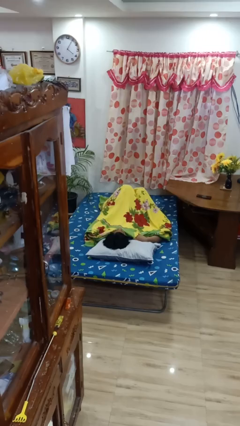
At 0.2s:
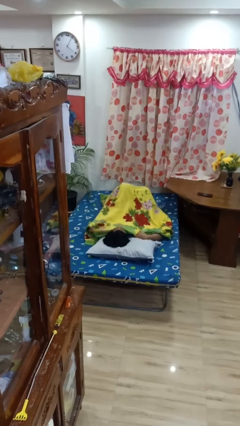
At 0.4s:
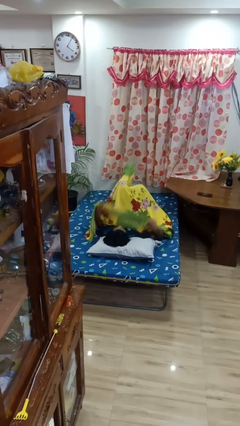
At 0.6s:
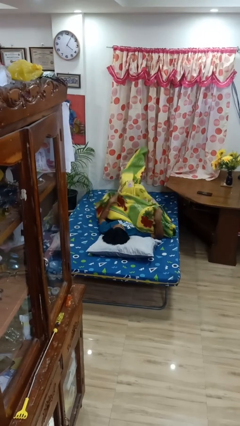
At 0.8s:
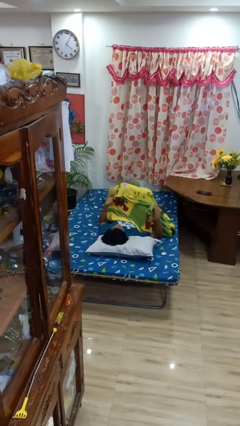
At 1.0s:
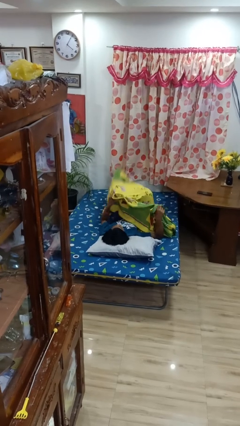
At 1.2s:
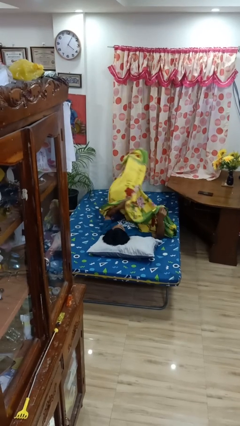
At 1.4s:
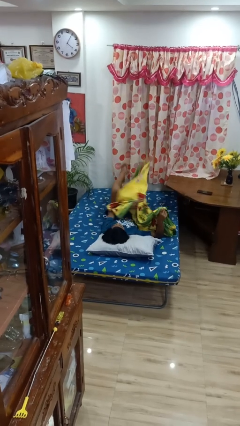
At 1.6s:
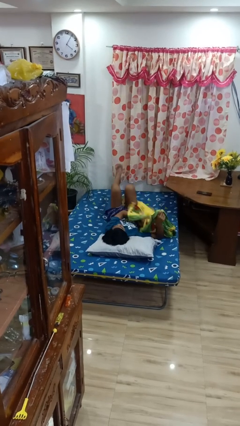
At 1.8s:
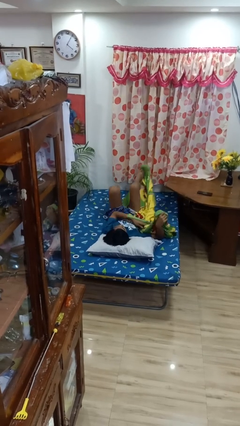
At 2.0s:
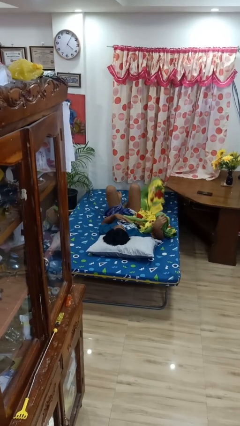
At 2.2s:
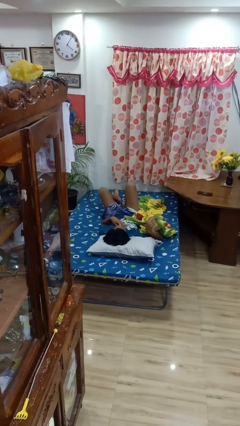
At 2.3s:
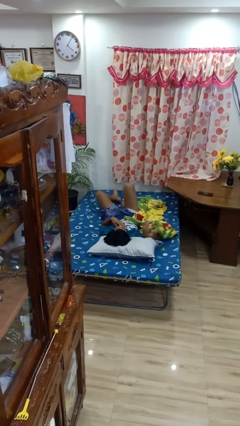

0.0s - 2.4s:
person uncovers with bedsheets

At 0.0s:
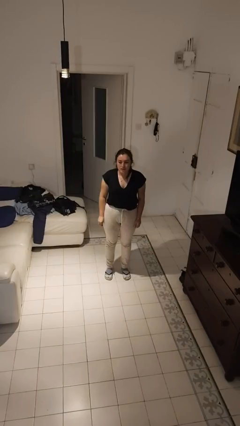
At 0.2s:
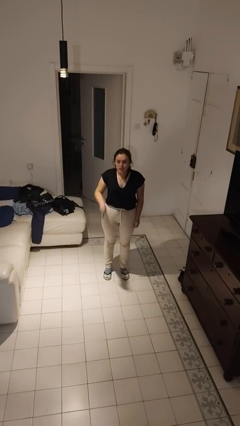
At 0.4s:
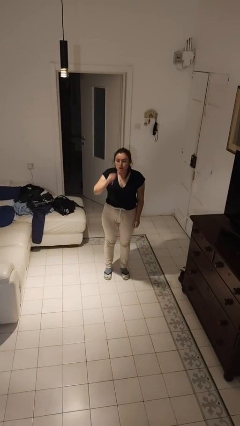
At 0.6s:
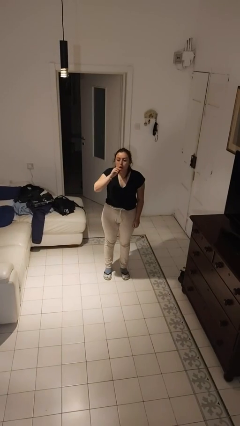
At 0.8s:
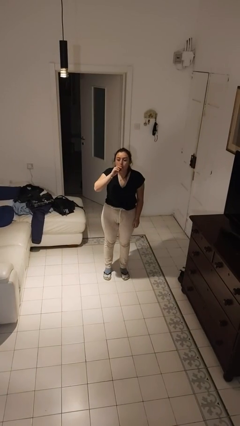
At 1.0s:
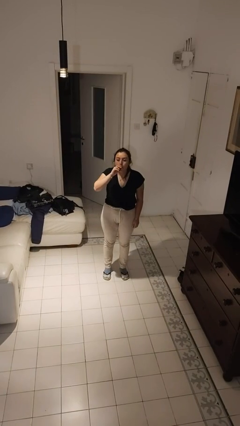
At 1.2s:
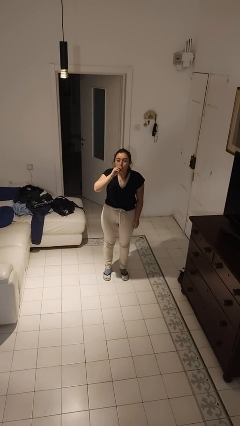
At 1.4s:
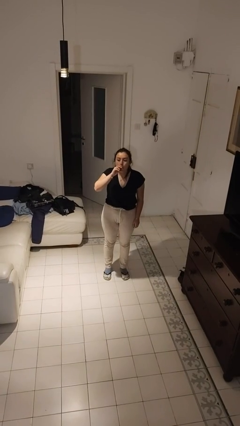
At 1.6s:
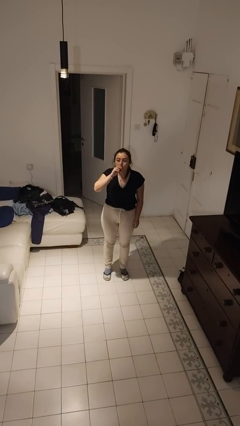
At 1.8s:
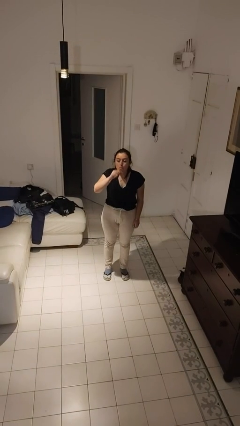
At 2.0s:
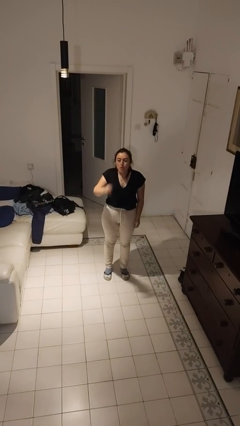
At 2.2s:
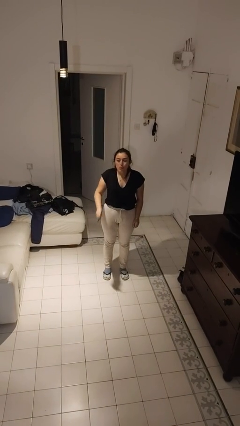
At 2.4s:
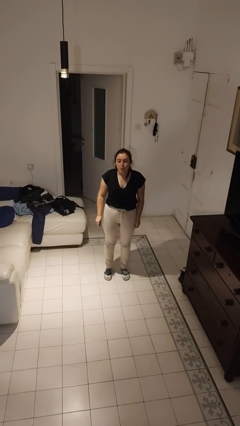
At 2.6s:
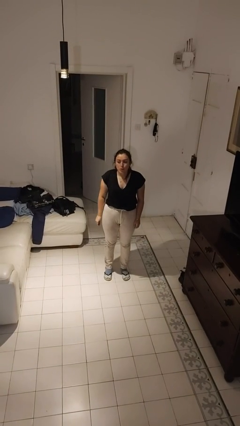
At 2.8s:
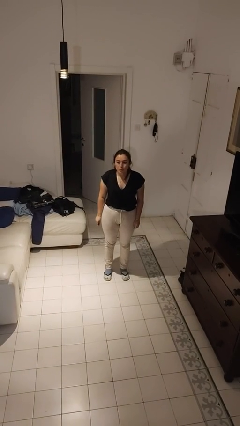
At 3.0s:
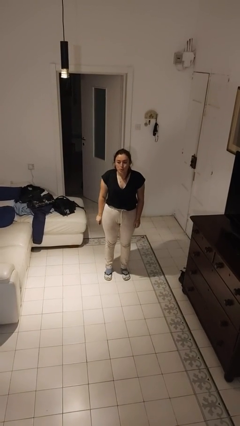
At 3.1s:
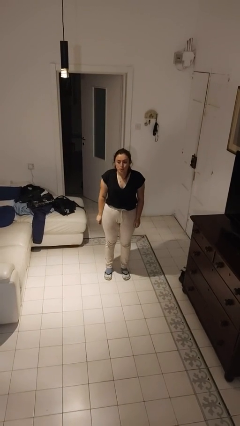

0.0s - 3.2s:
person vapes

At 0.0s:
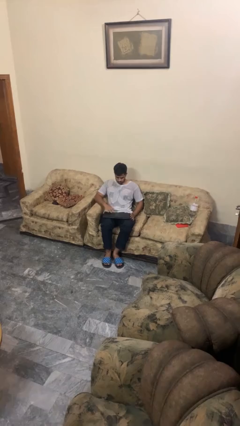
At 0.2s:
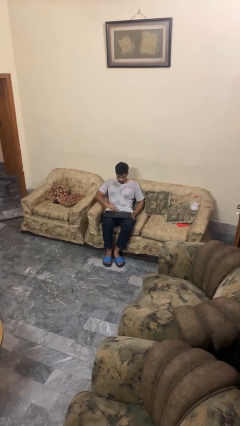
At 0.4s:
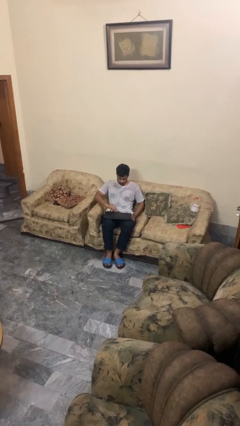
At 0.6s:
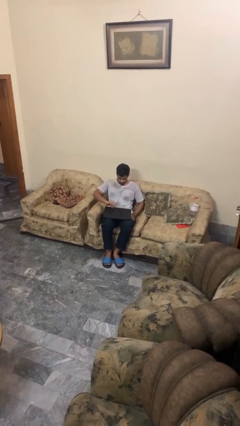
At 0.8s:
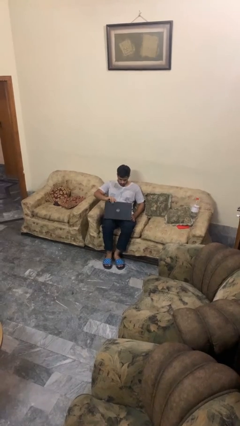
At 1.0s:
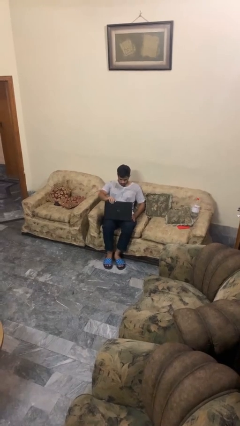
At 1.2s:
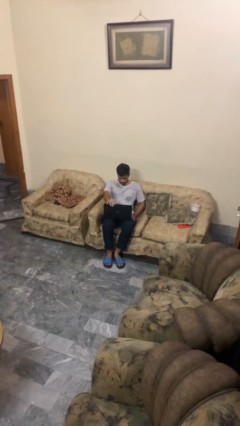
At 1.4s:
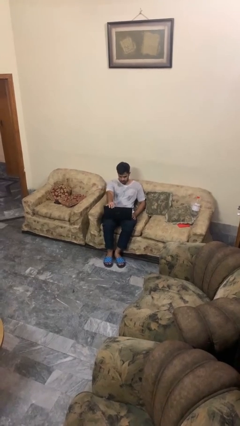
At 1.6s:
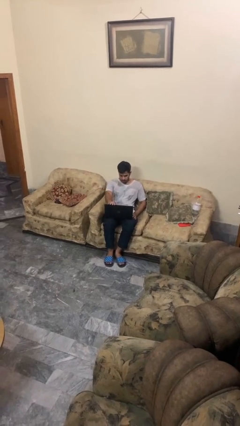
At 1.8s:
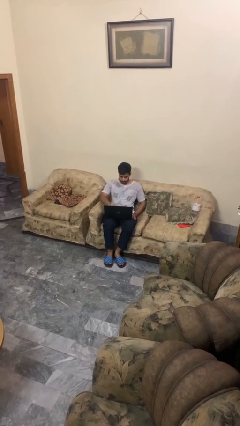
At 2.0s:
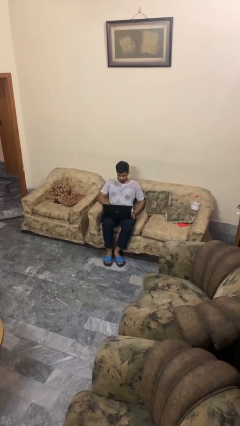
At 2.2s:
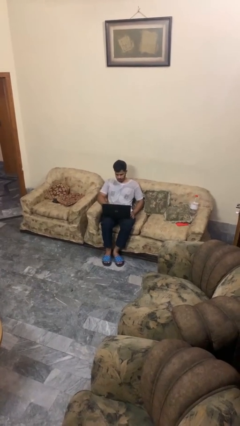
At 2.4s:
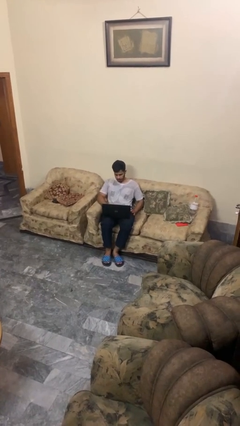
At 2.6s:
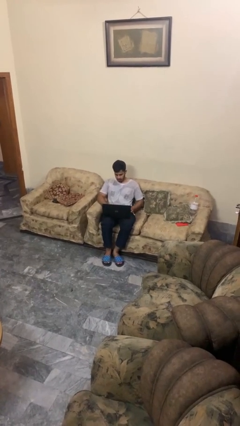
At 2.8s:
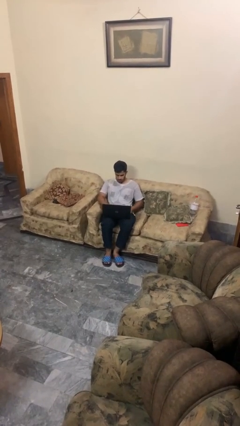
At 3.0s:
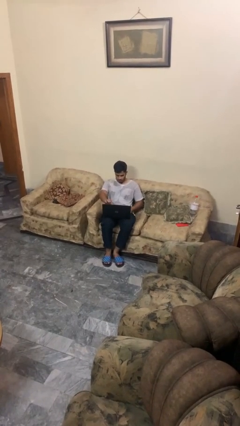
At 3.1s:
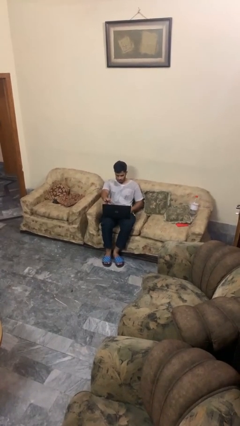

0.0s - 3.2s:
person opens laptop

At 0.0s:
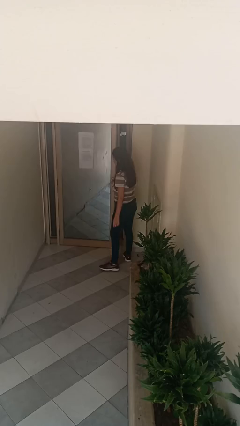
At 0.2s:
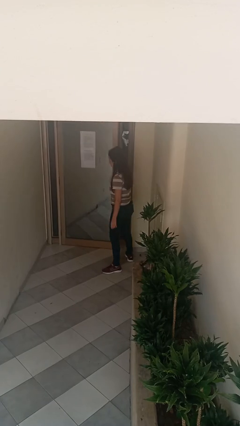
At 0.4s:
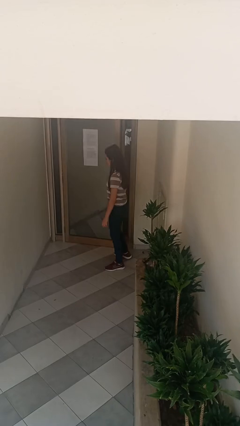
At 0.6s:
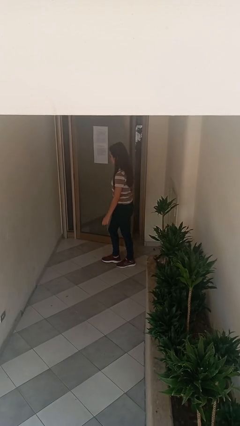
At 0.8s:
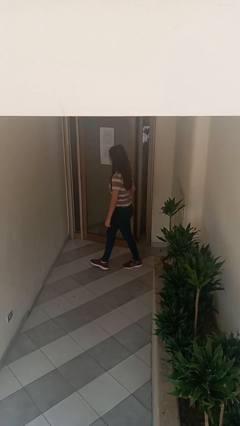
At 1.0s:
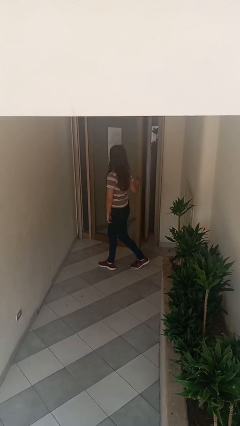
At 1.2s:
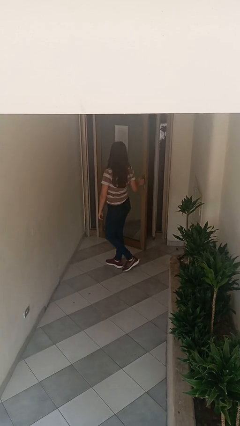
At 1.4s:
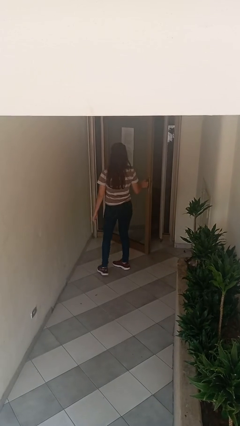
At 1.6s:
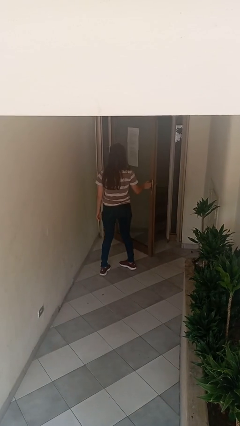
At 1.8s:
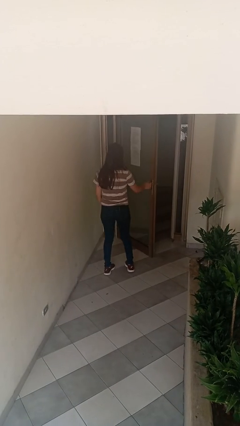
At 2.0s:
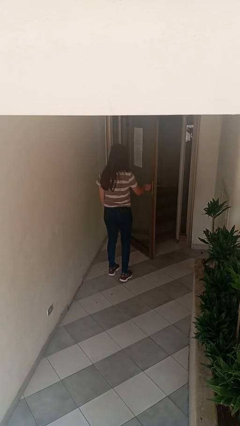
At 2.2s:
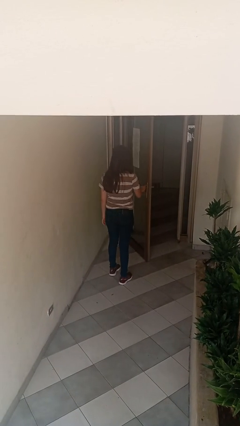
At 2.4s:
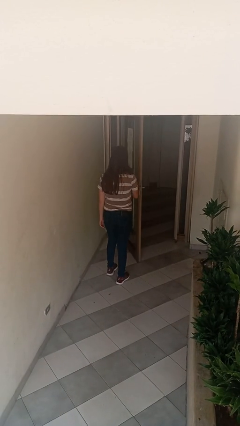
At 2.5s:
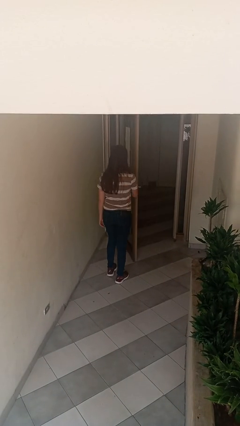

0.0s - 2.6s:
person opens facility door

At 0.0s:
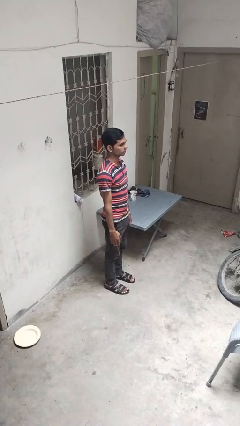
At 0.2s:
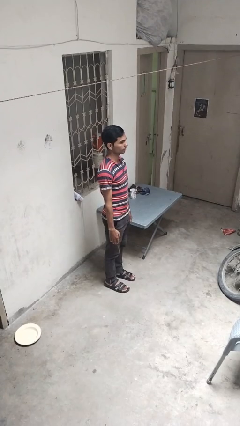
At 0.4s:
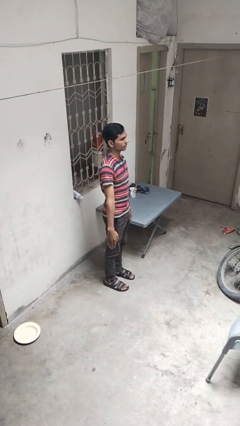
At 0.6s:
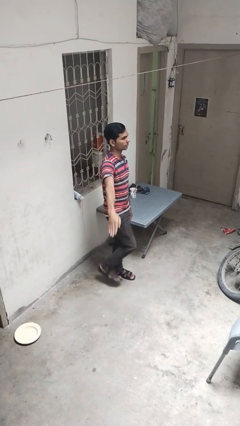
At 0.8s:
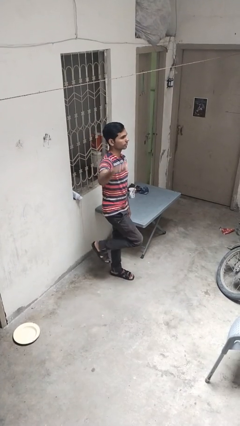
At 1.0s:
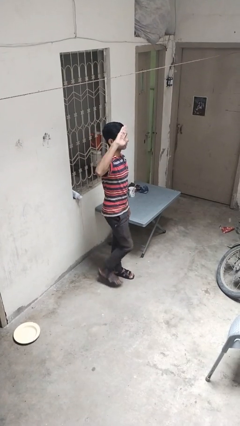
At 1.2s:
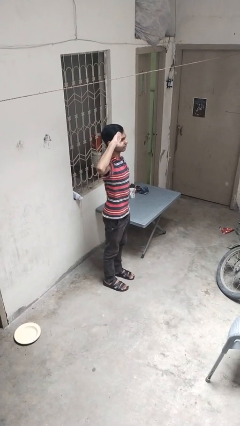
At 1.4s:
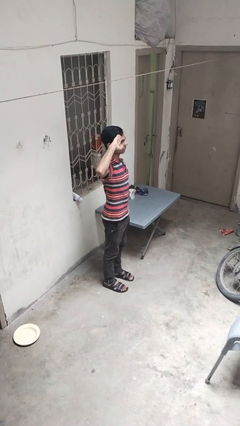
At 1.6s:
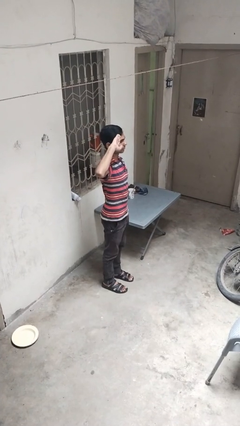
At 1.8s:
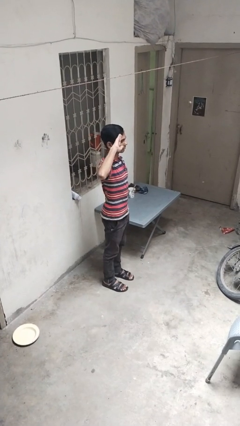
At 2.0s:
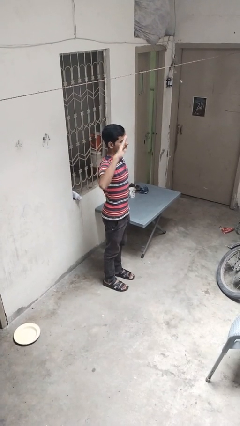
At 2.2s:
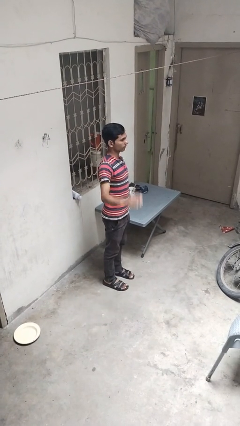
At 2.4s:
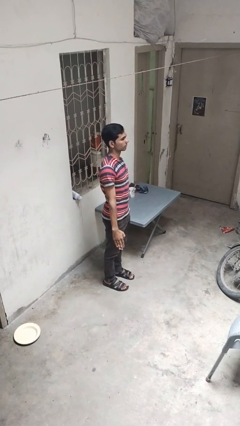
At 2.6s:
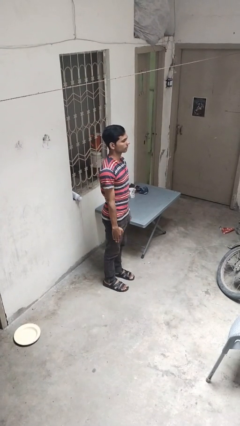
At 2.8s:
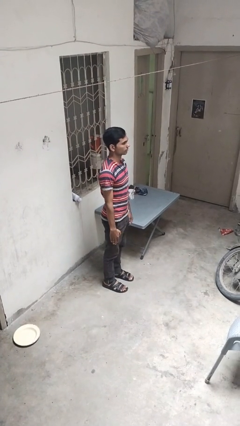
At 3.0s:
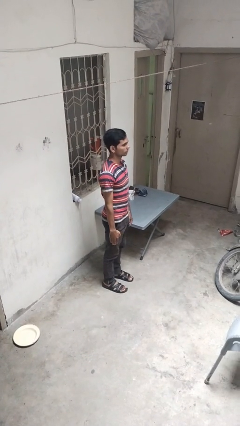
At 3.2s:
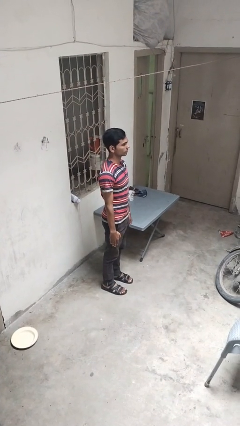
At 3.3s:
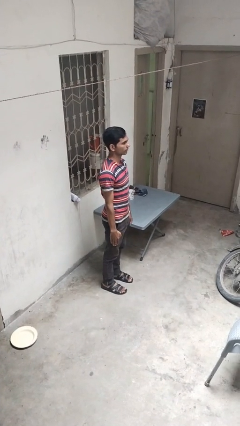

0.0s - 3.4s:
person salutes

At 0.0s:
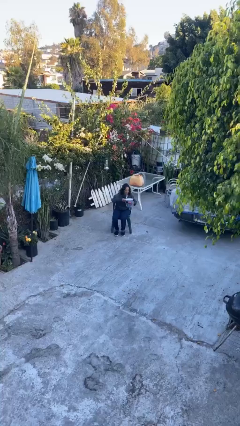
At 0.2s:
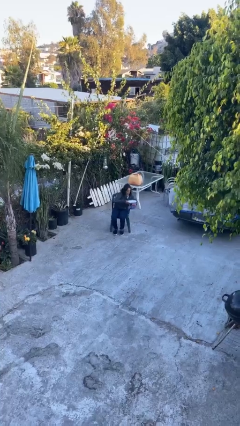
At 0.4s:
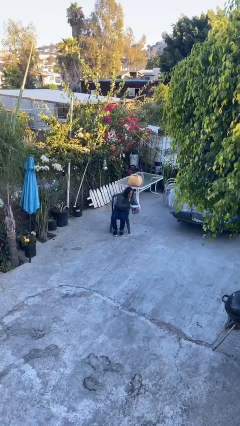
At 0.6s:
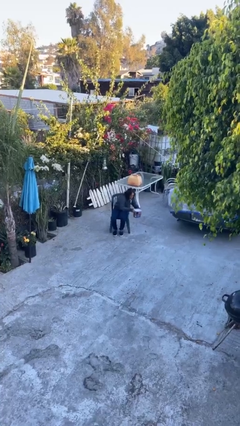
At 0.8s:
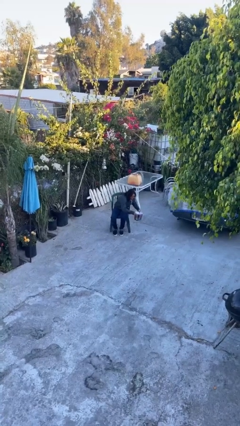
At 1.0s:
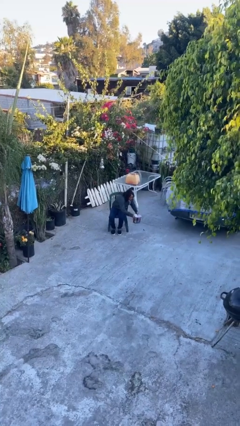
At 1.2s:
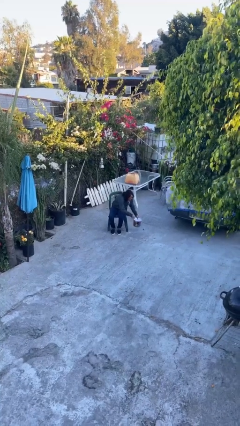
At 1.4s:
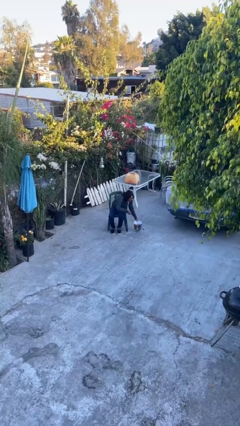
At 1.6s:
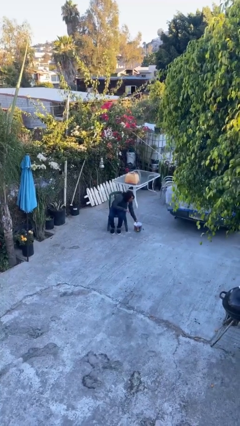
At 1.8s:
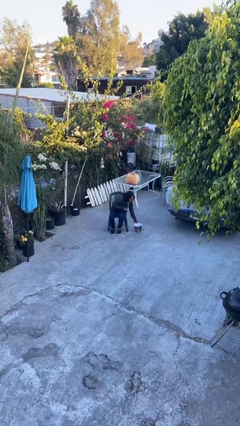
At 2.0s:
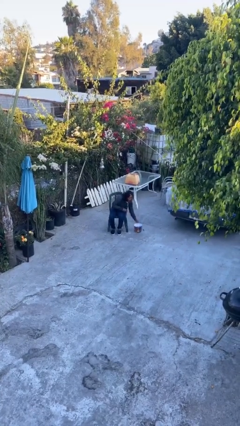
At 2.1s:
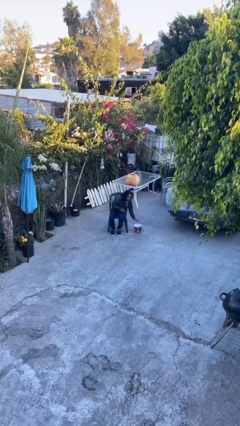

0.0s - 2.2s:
person puts down object on floor

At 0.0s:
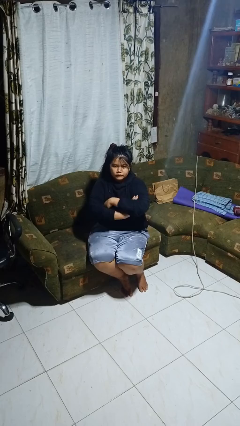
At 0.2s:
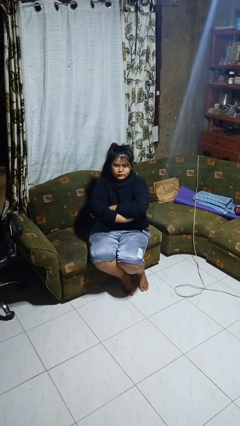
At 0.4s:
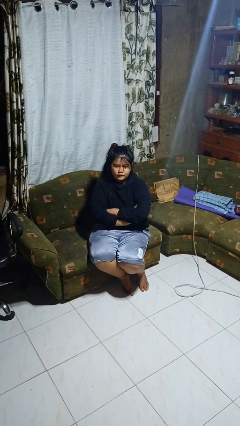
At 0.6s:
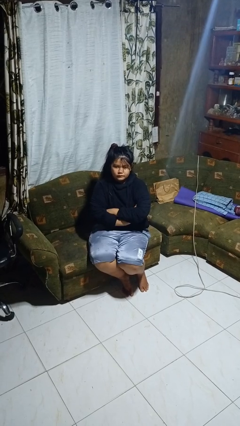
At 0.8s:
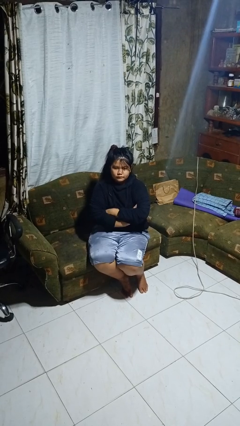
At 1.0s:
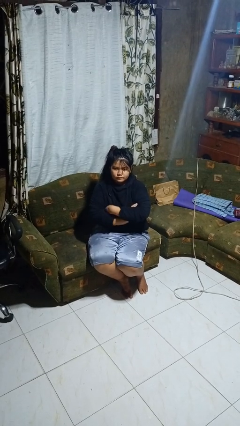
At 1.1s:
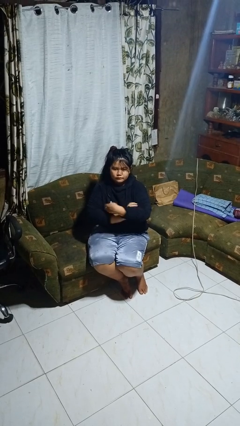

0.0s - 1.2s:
person crosses arms
